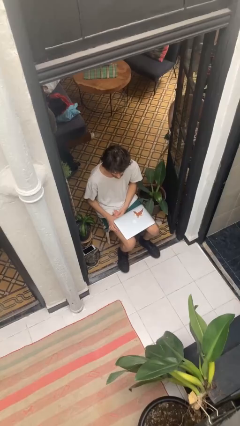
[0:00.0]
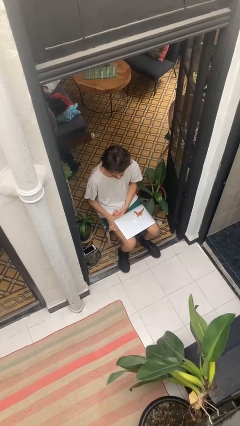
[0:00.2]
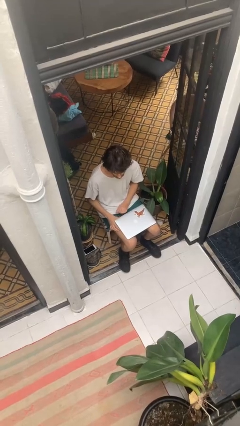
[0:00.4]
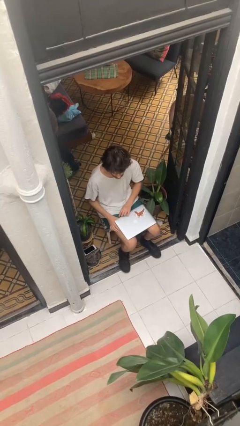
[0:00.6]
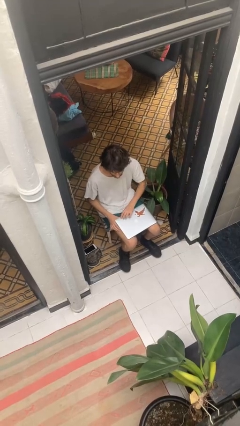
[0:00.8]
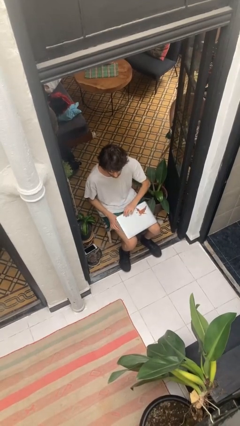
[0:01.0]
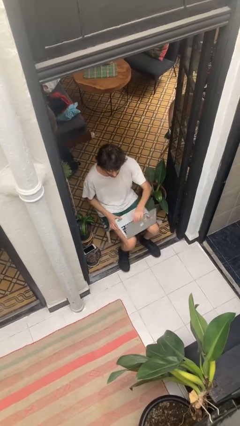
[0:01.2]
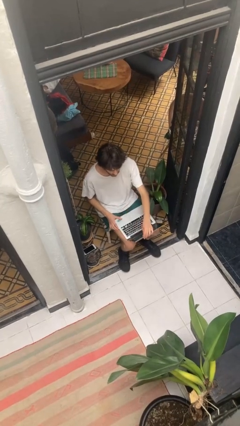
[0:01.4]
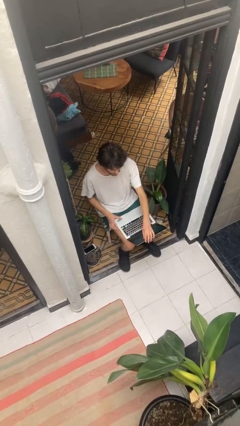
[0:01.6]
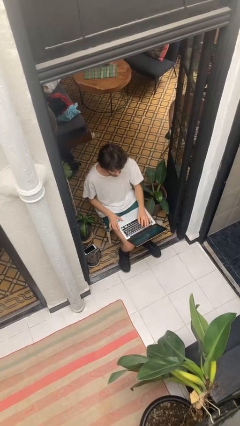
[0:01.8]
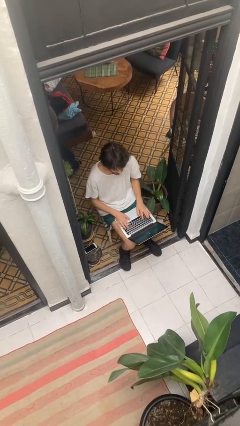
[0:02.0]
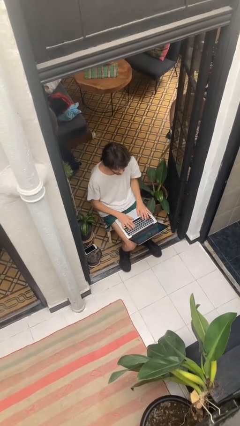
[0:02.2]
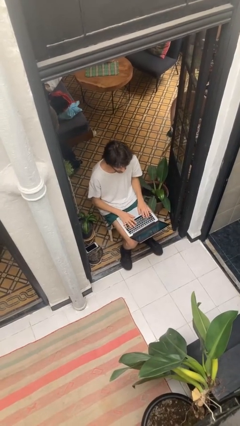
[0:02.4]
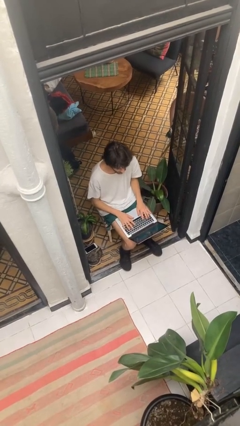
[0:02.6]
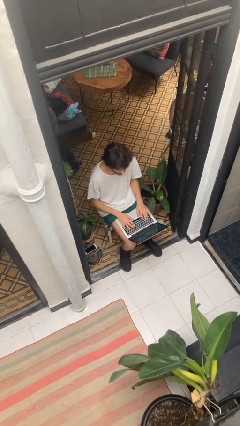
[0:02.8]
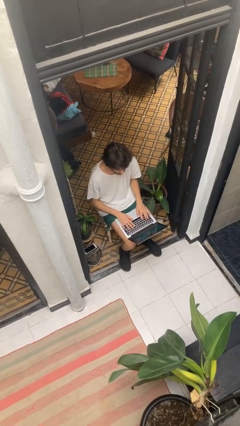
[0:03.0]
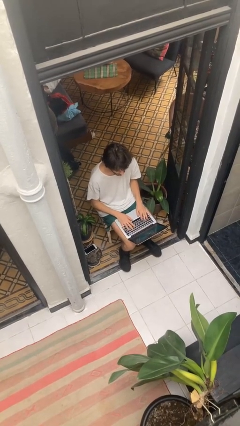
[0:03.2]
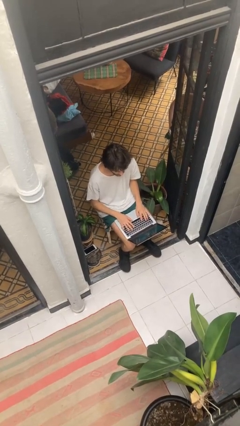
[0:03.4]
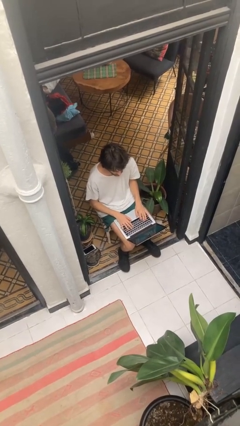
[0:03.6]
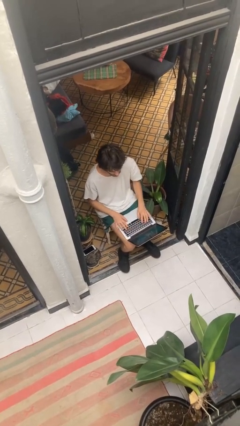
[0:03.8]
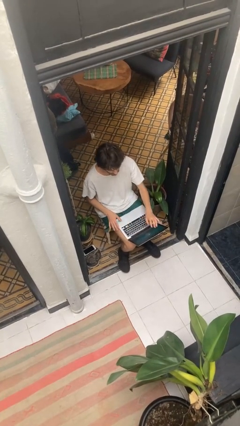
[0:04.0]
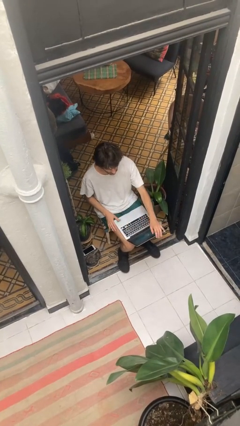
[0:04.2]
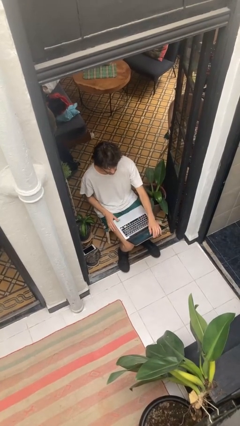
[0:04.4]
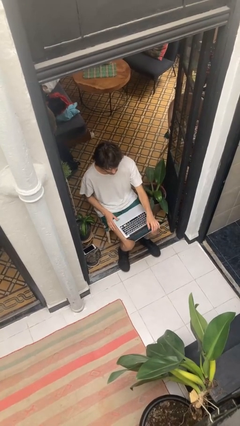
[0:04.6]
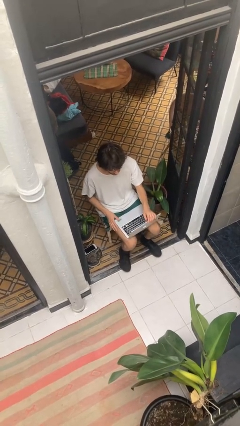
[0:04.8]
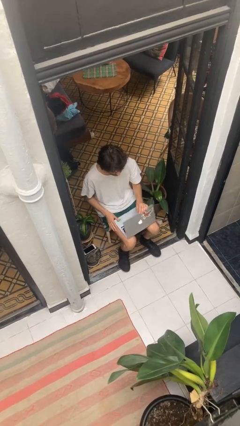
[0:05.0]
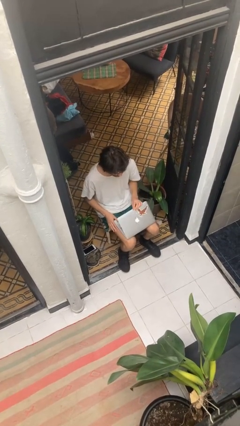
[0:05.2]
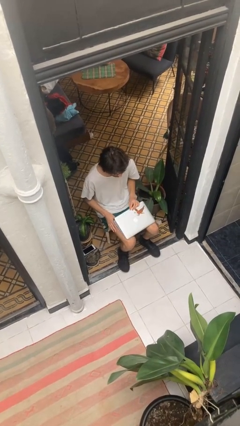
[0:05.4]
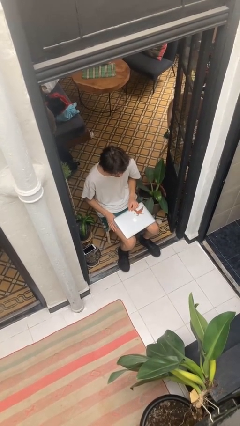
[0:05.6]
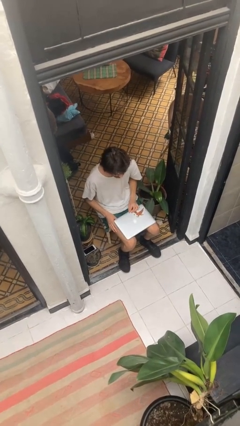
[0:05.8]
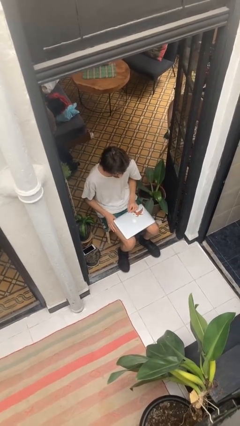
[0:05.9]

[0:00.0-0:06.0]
person interacts with laptop

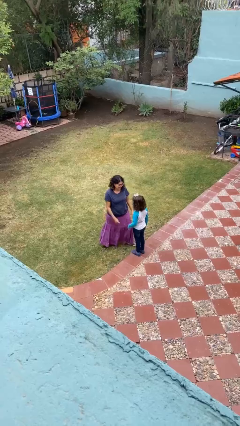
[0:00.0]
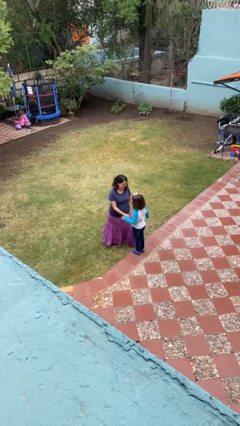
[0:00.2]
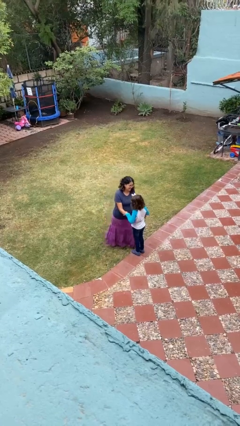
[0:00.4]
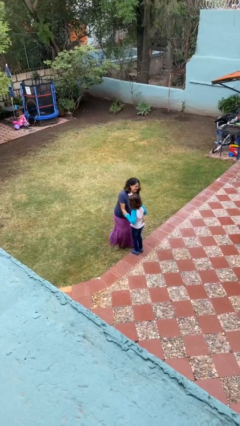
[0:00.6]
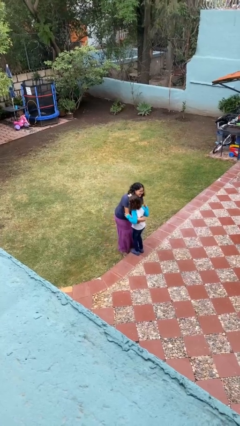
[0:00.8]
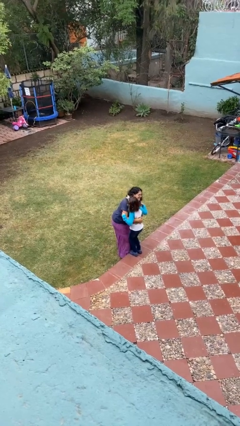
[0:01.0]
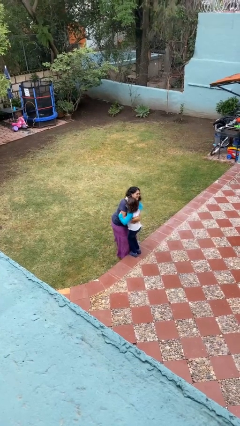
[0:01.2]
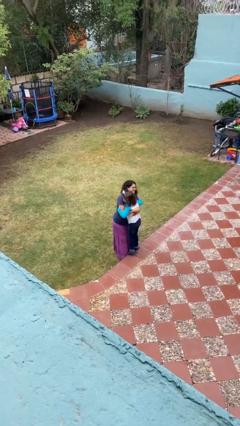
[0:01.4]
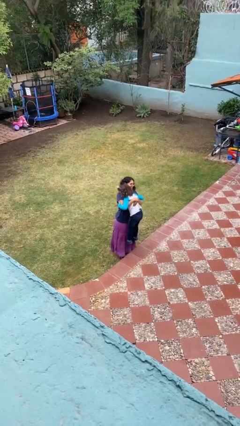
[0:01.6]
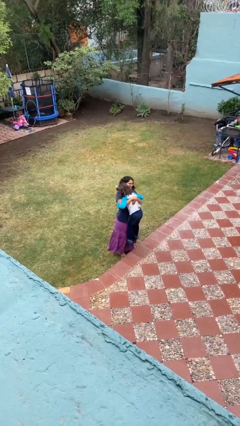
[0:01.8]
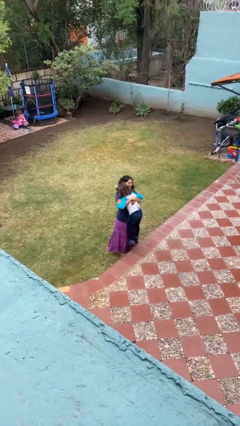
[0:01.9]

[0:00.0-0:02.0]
person picks up person

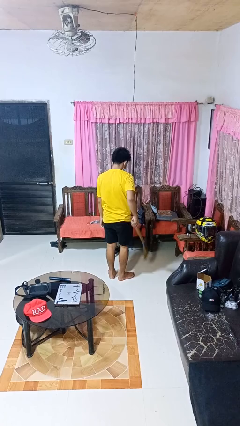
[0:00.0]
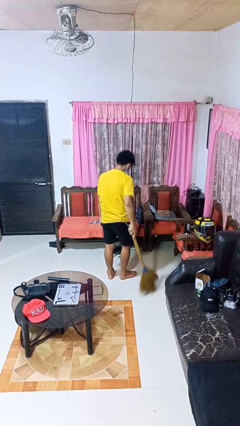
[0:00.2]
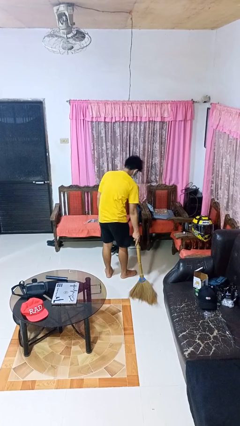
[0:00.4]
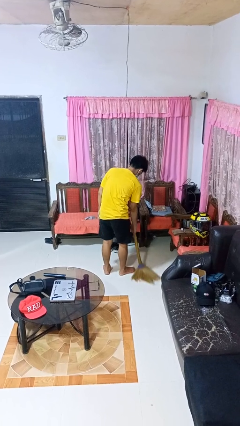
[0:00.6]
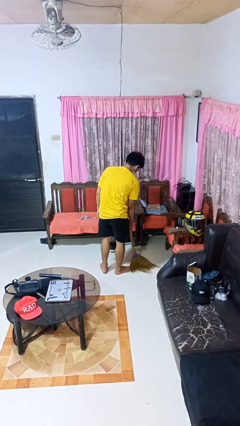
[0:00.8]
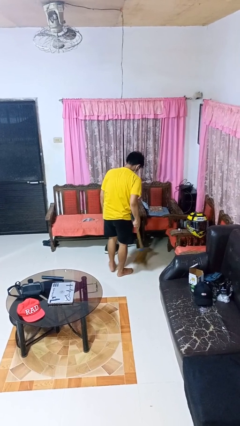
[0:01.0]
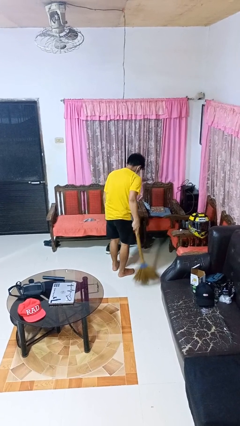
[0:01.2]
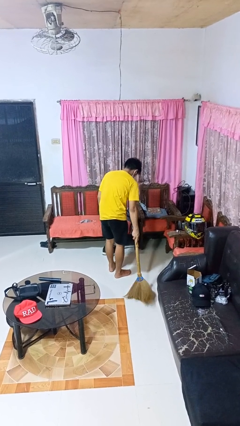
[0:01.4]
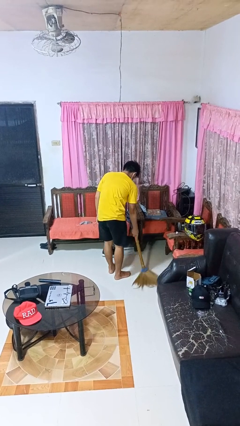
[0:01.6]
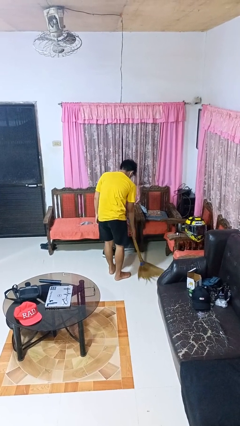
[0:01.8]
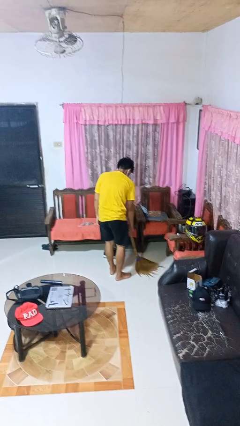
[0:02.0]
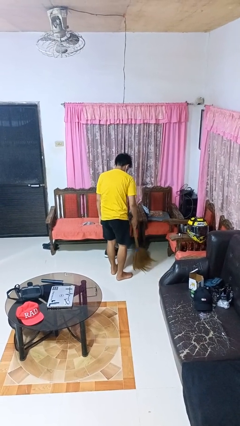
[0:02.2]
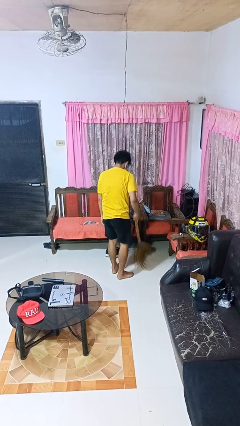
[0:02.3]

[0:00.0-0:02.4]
person sweeps floor

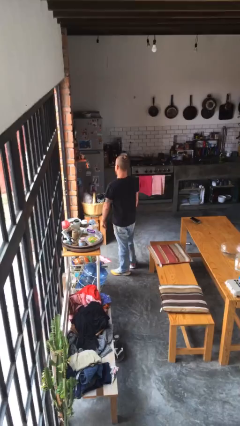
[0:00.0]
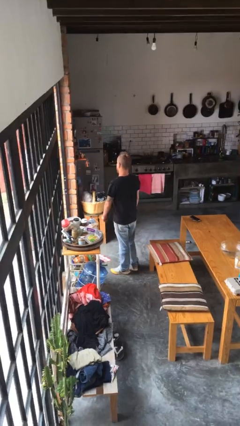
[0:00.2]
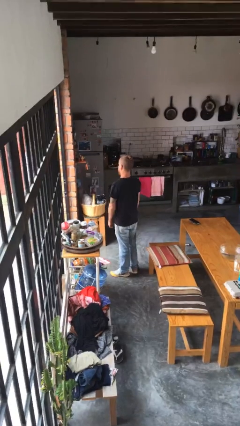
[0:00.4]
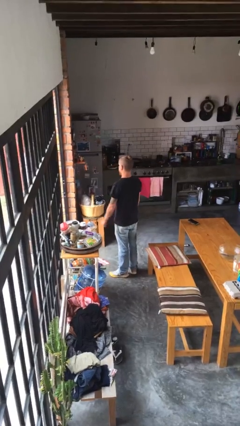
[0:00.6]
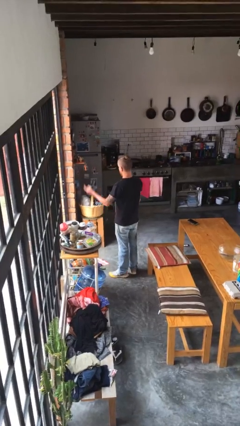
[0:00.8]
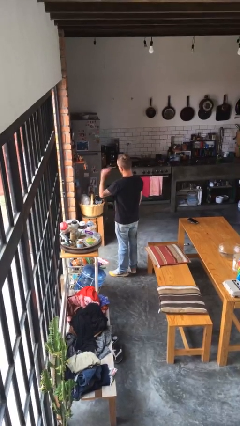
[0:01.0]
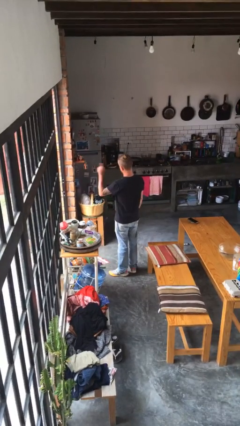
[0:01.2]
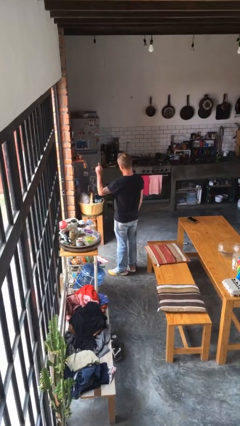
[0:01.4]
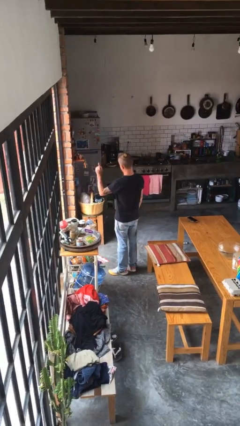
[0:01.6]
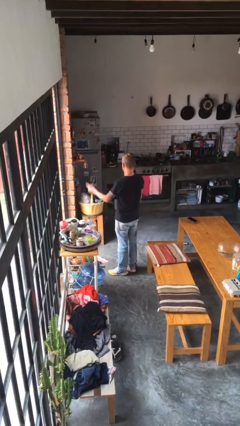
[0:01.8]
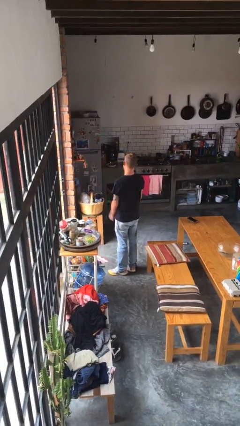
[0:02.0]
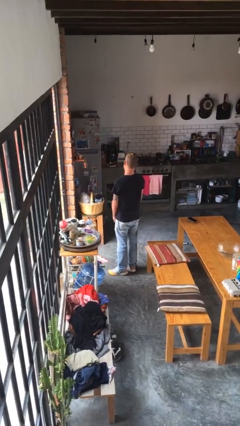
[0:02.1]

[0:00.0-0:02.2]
person gestures number one

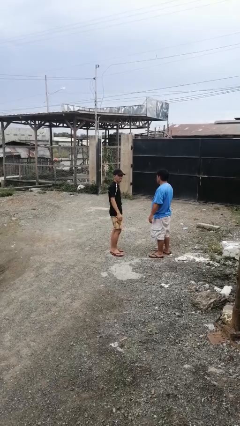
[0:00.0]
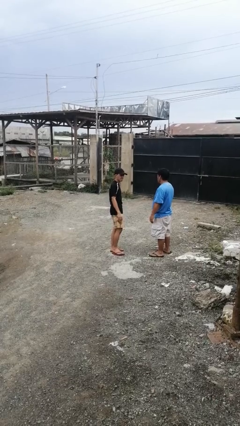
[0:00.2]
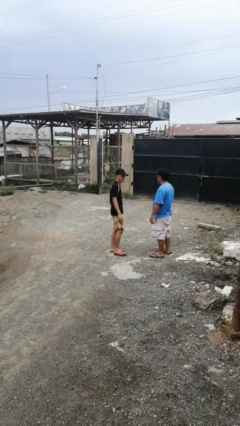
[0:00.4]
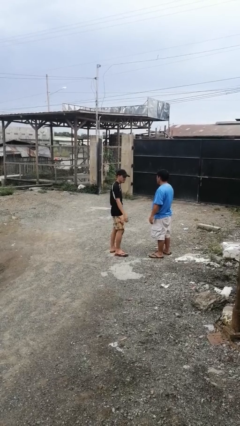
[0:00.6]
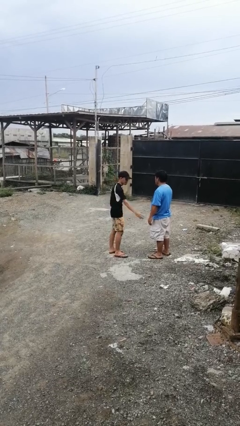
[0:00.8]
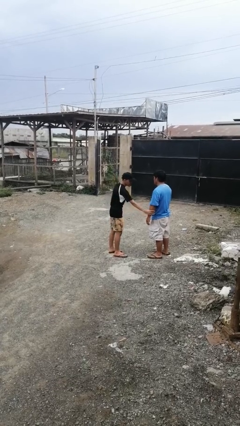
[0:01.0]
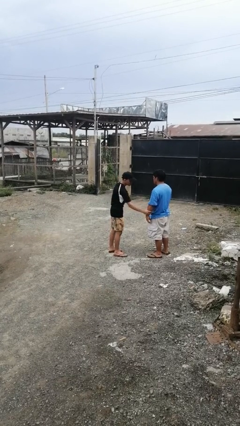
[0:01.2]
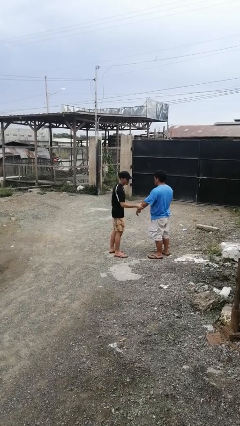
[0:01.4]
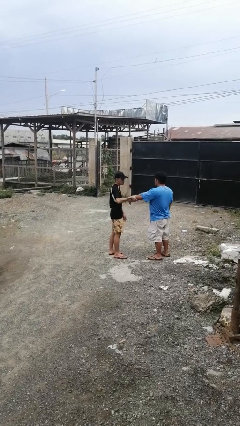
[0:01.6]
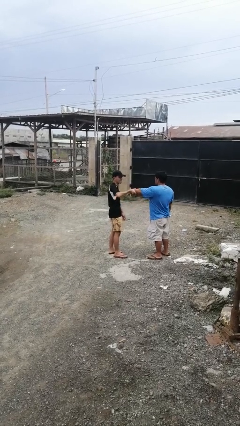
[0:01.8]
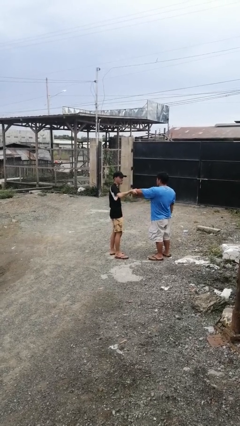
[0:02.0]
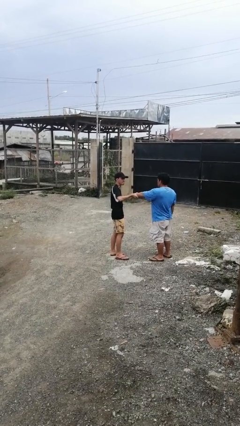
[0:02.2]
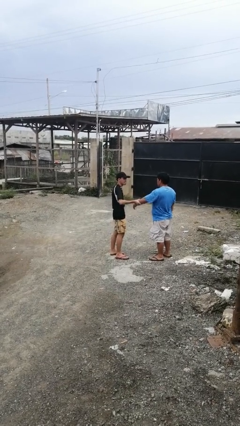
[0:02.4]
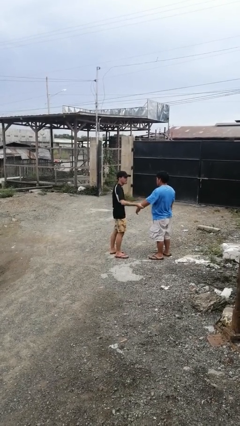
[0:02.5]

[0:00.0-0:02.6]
person grabs person by forearm

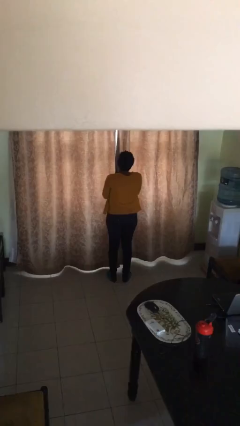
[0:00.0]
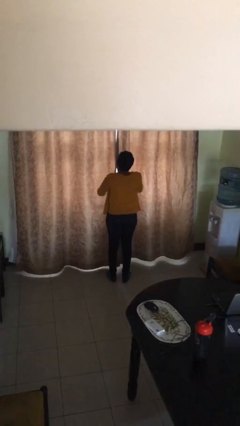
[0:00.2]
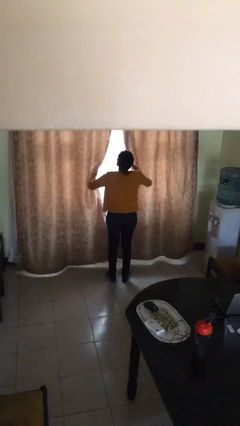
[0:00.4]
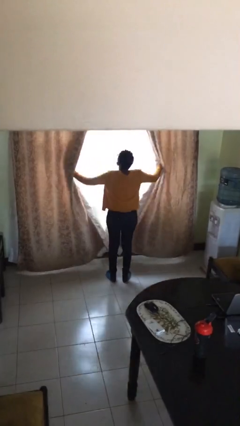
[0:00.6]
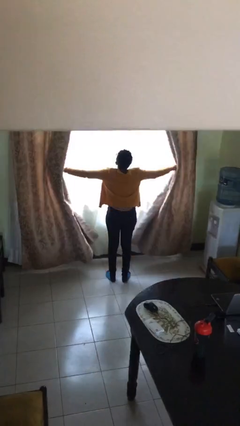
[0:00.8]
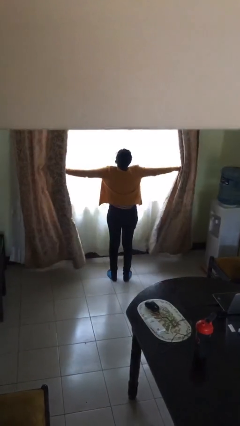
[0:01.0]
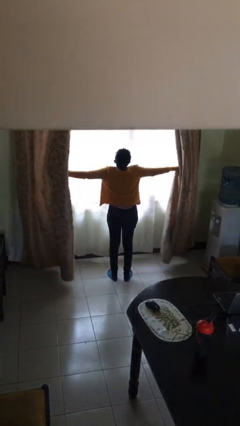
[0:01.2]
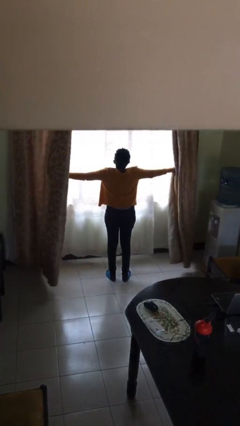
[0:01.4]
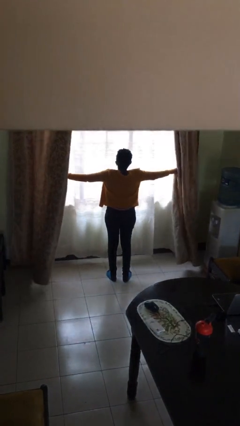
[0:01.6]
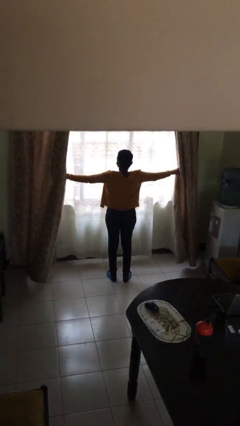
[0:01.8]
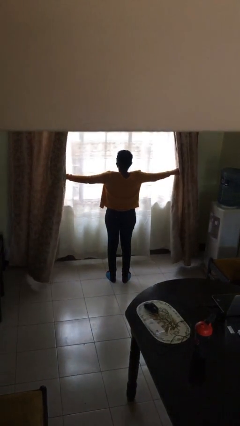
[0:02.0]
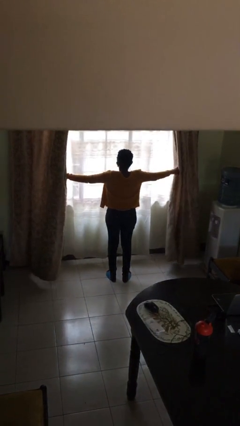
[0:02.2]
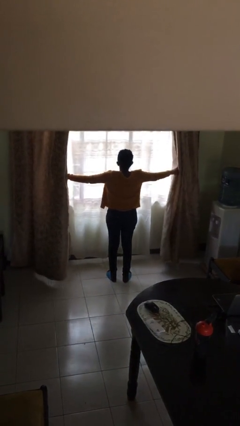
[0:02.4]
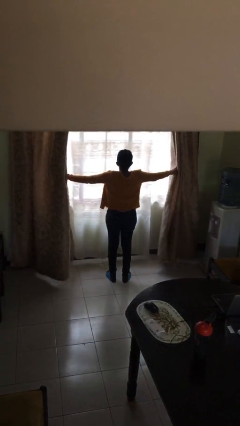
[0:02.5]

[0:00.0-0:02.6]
person opens curtains
